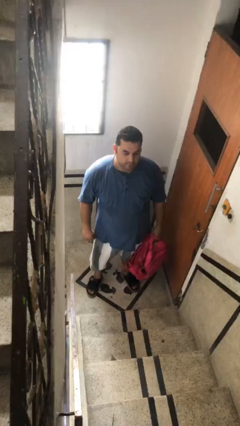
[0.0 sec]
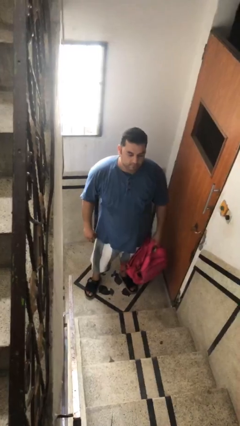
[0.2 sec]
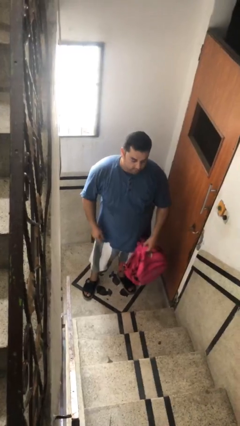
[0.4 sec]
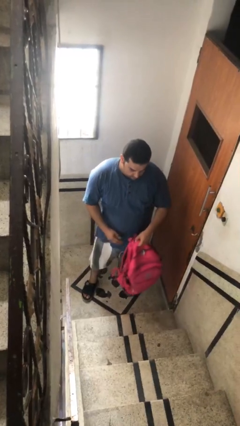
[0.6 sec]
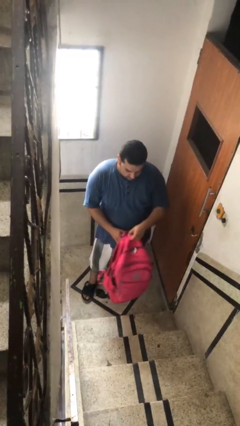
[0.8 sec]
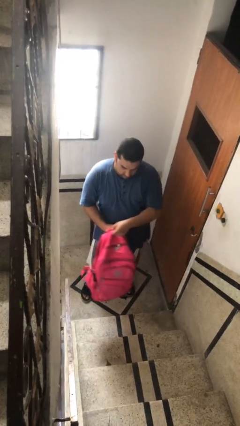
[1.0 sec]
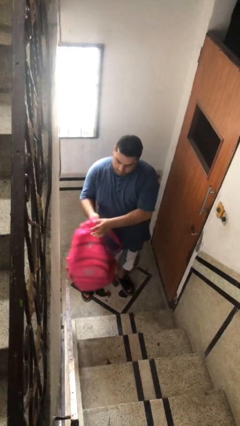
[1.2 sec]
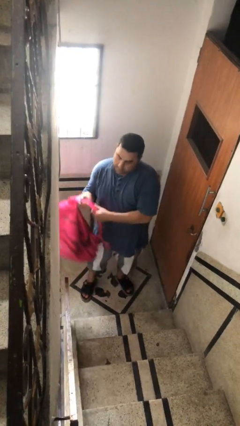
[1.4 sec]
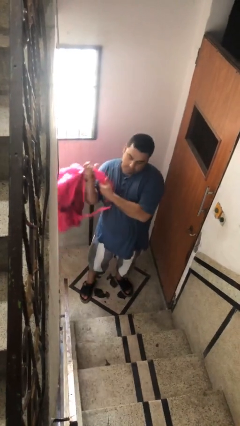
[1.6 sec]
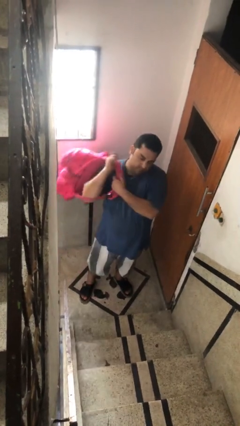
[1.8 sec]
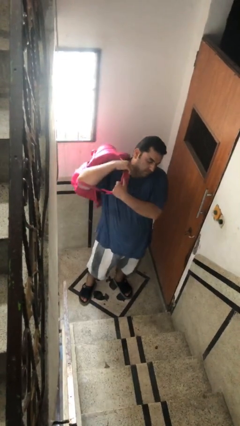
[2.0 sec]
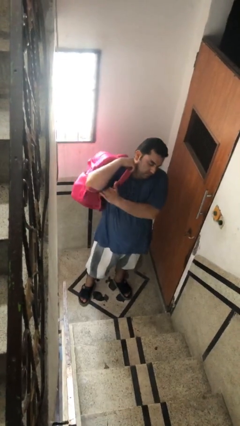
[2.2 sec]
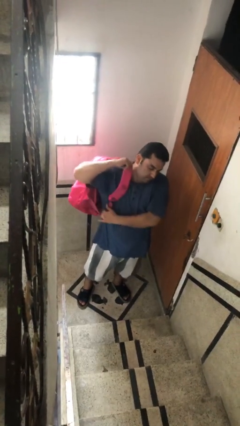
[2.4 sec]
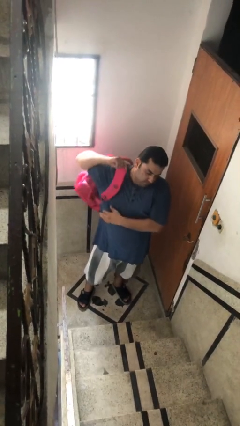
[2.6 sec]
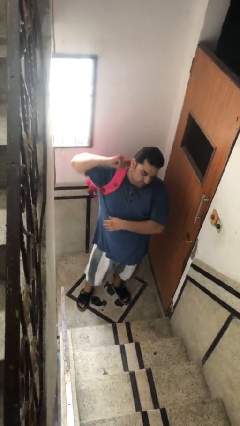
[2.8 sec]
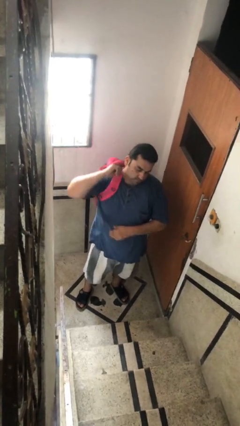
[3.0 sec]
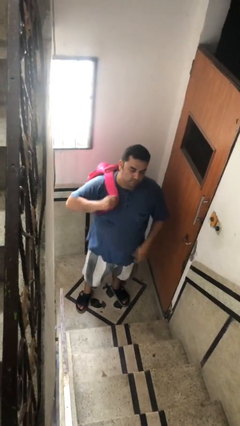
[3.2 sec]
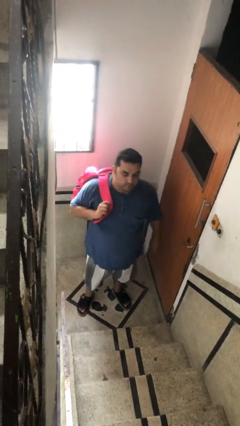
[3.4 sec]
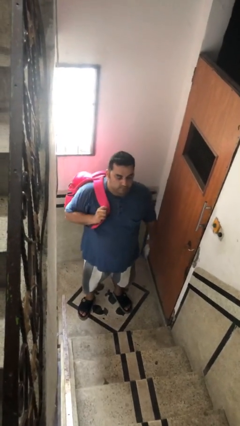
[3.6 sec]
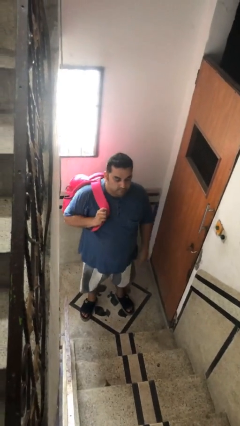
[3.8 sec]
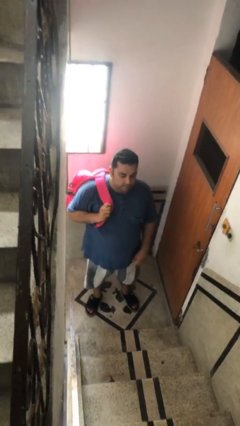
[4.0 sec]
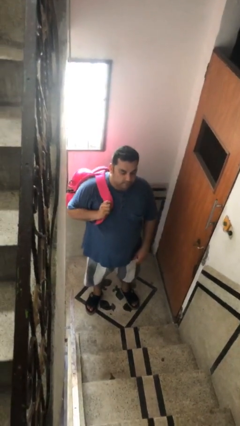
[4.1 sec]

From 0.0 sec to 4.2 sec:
person puts on backpack

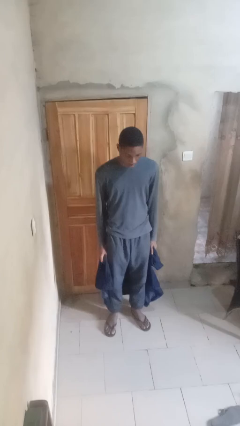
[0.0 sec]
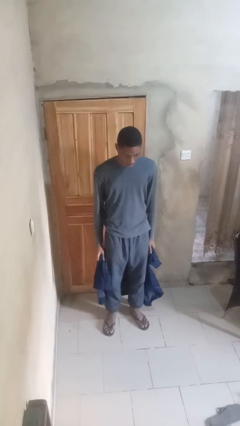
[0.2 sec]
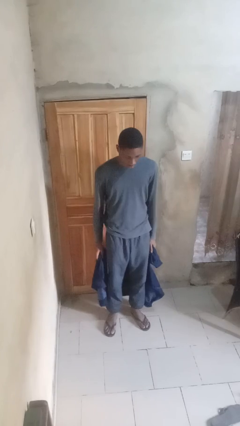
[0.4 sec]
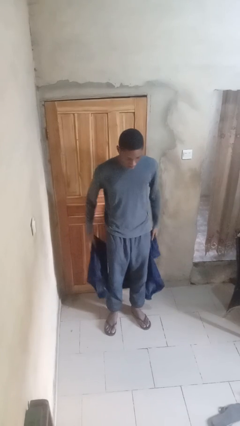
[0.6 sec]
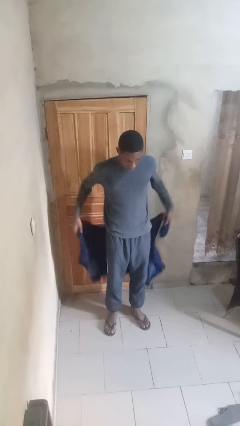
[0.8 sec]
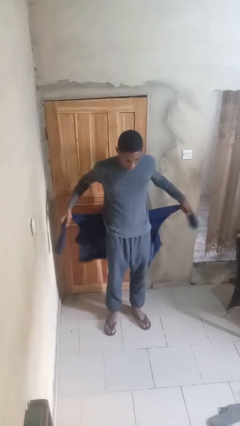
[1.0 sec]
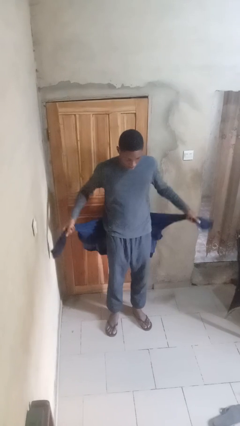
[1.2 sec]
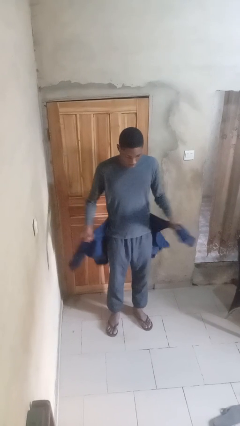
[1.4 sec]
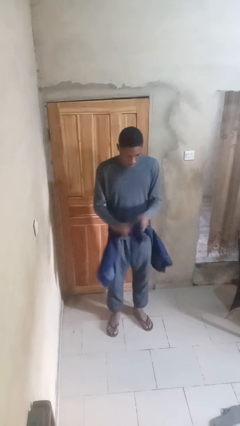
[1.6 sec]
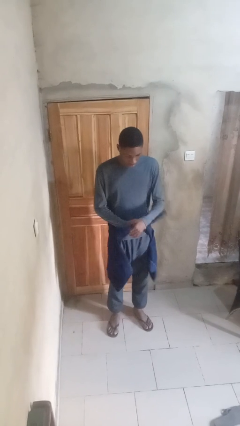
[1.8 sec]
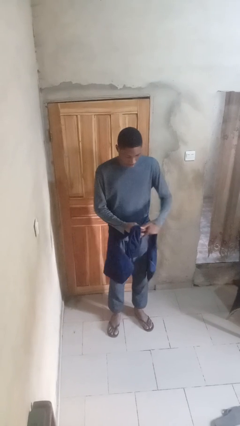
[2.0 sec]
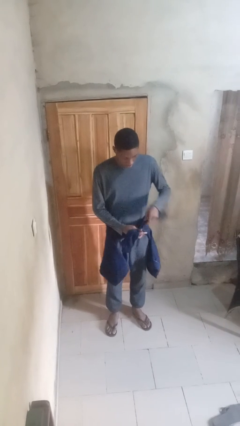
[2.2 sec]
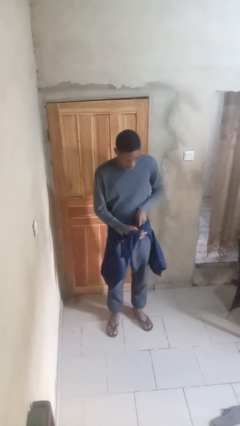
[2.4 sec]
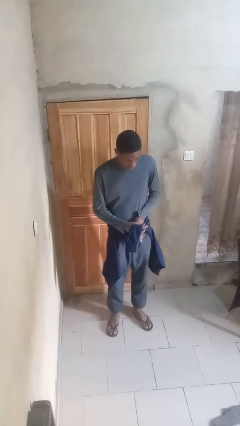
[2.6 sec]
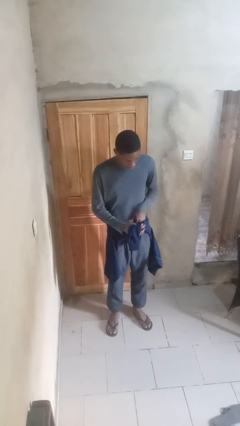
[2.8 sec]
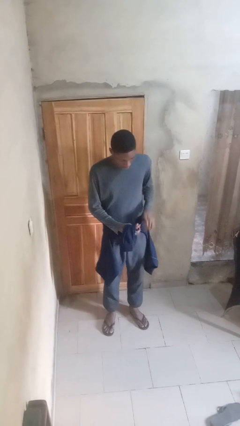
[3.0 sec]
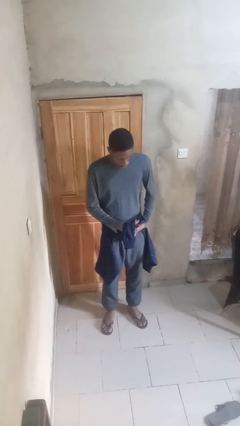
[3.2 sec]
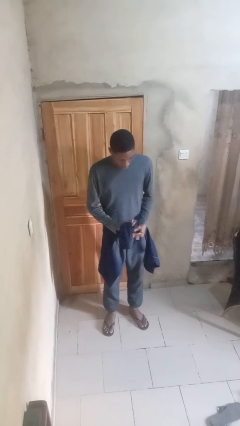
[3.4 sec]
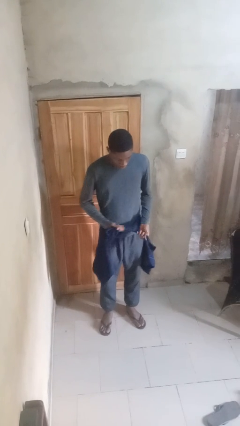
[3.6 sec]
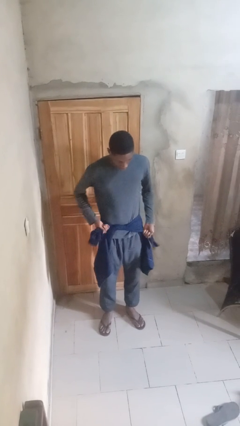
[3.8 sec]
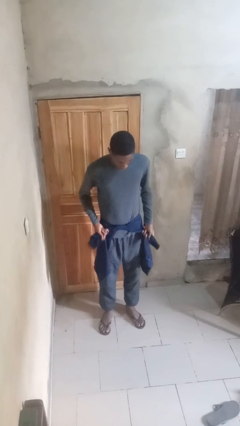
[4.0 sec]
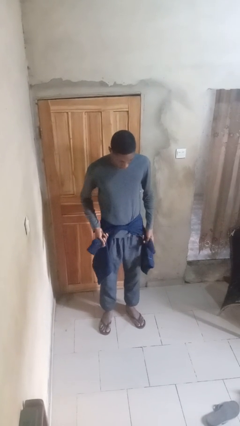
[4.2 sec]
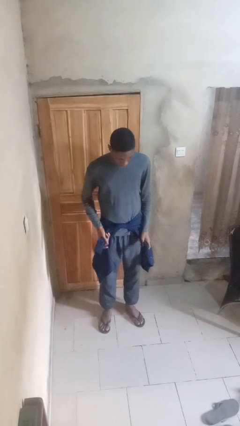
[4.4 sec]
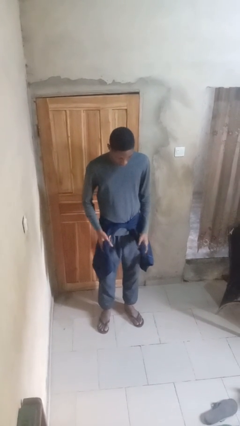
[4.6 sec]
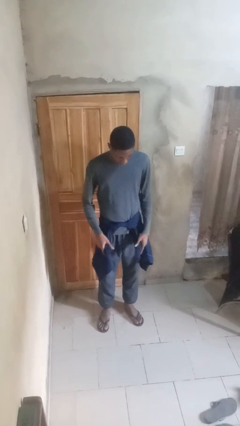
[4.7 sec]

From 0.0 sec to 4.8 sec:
person ties jacket around waist

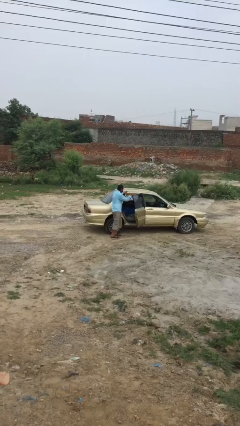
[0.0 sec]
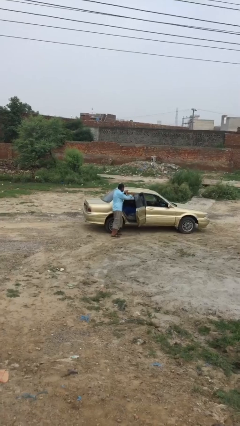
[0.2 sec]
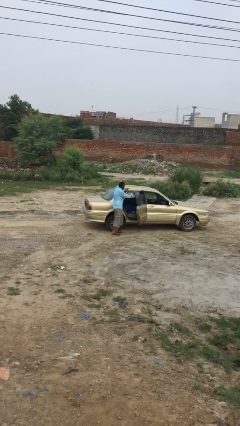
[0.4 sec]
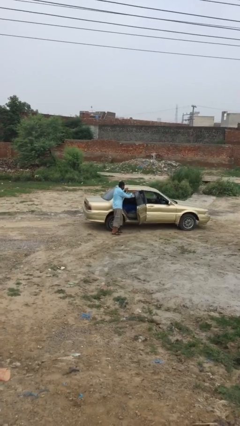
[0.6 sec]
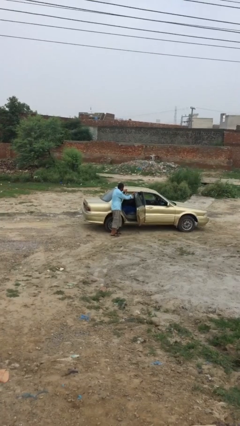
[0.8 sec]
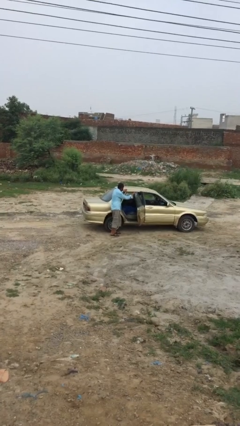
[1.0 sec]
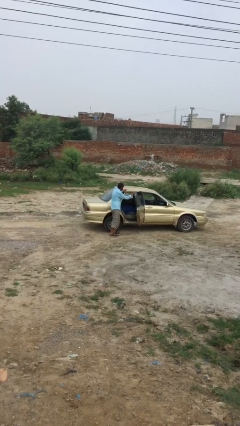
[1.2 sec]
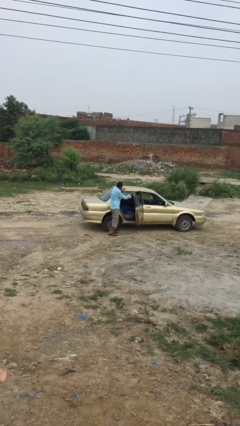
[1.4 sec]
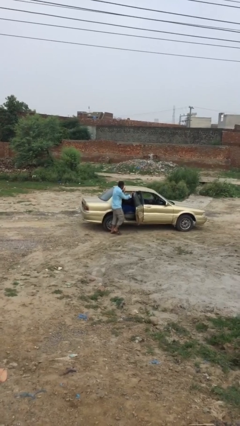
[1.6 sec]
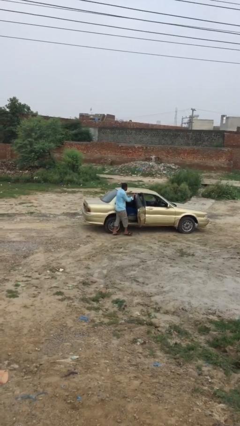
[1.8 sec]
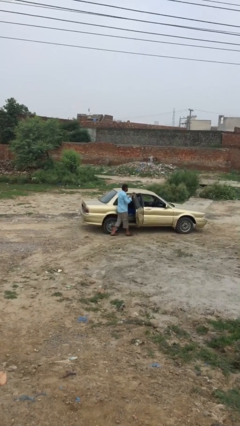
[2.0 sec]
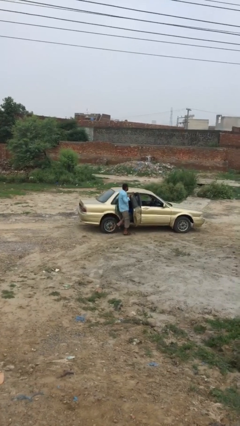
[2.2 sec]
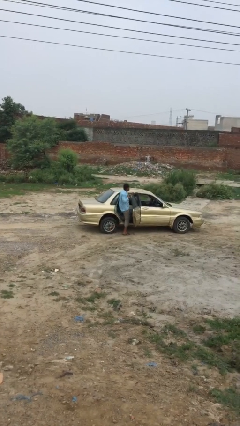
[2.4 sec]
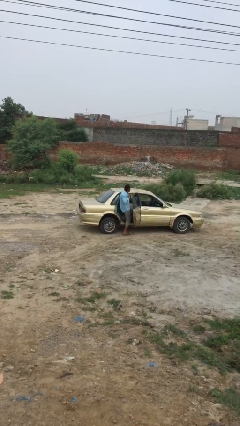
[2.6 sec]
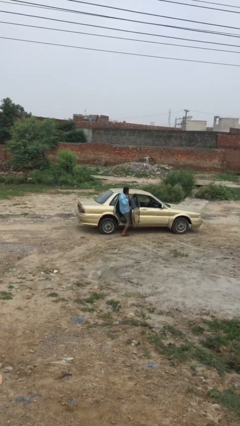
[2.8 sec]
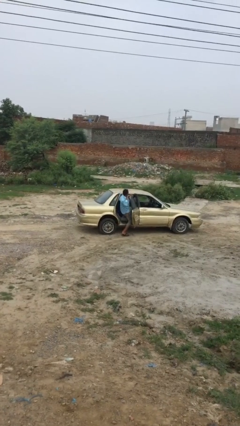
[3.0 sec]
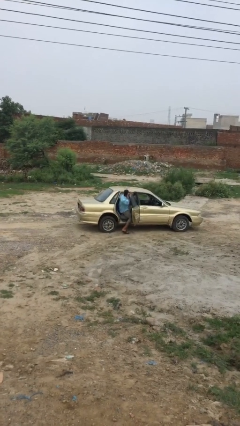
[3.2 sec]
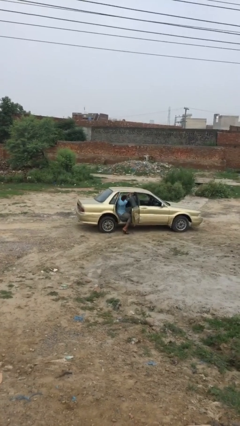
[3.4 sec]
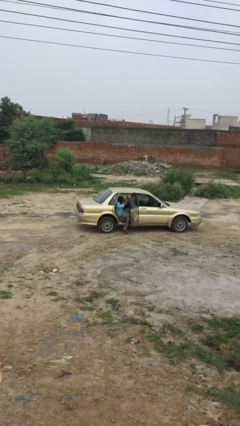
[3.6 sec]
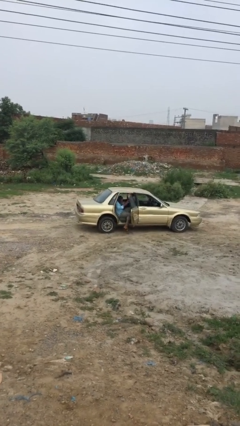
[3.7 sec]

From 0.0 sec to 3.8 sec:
person enters car

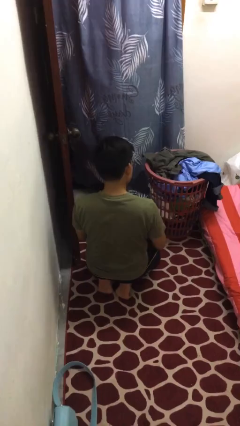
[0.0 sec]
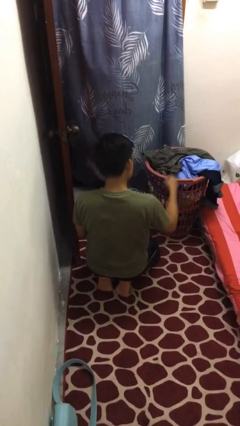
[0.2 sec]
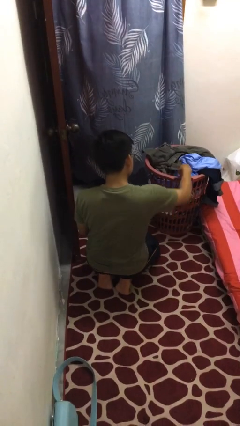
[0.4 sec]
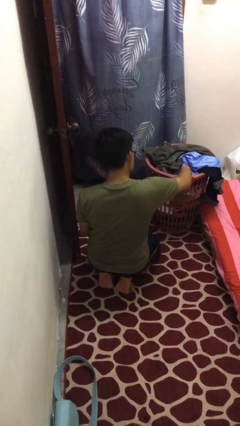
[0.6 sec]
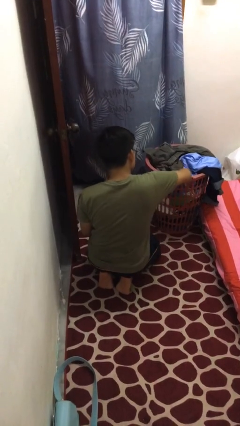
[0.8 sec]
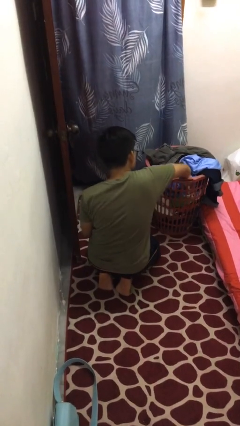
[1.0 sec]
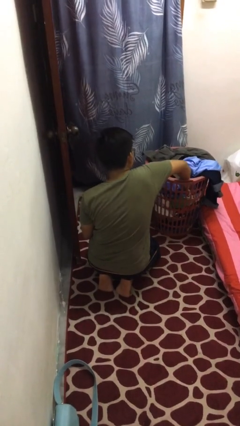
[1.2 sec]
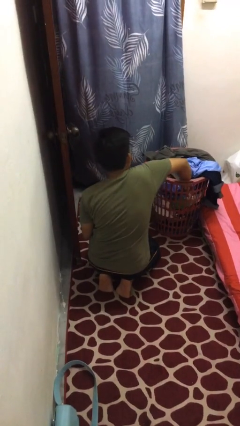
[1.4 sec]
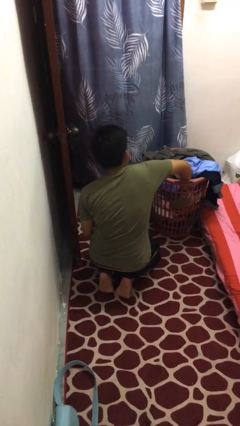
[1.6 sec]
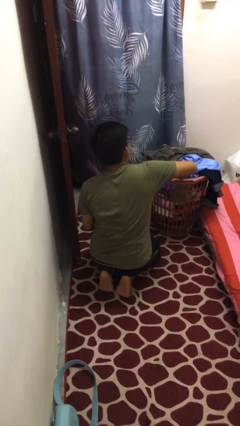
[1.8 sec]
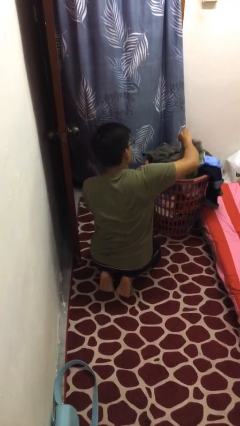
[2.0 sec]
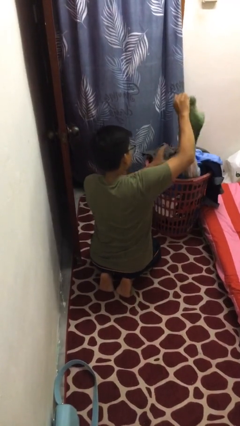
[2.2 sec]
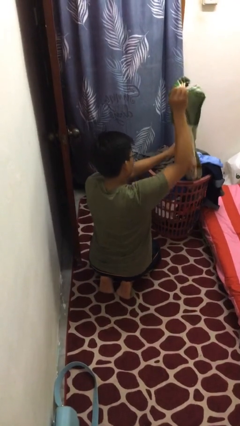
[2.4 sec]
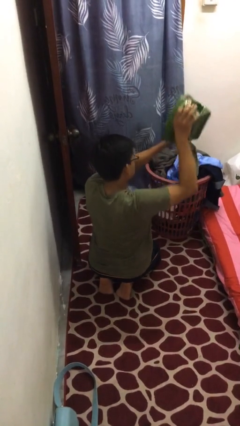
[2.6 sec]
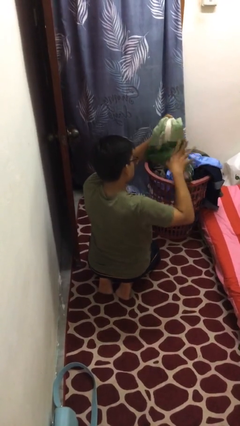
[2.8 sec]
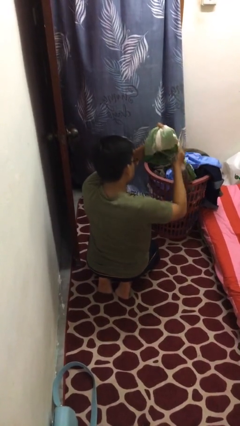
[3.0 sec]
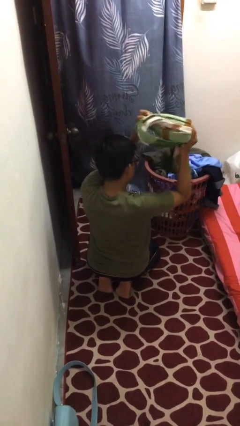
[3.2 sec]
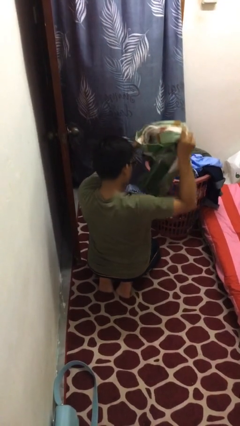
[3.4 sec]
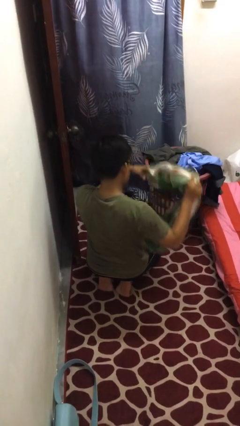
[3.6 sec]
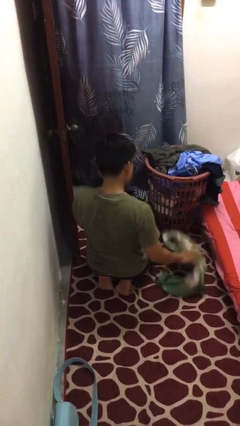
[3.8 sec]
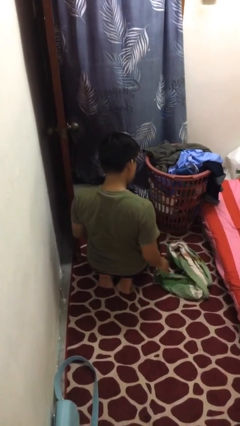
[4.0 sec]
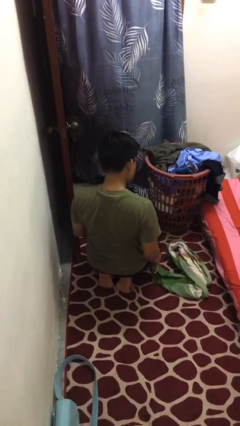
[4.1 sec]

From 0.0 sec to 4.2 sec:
person takes object from basket

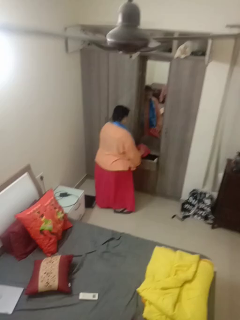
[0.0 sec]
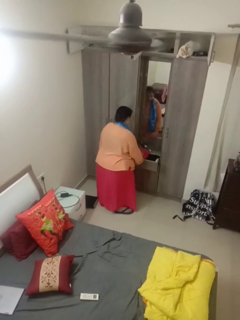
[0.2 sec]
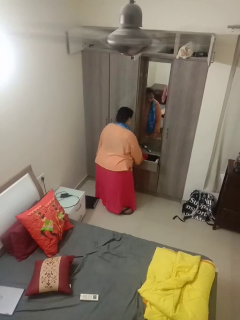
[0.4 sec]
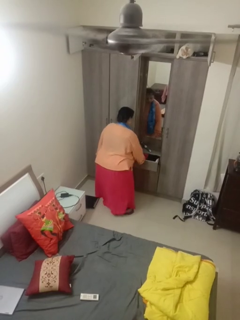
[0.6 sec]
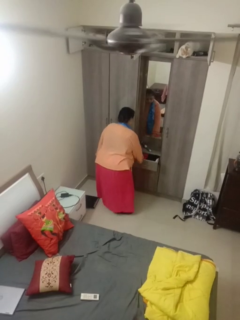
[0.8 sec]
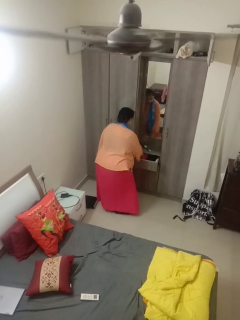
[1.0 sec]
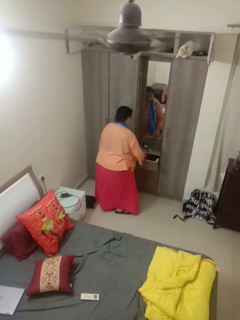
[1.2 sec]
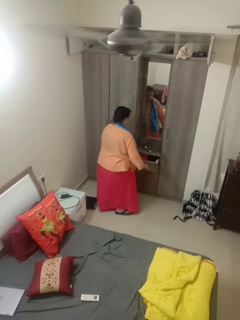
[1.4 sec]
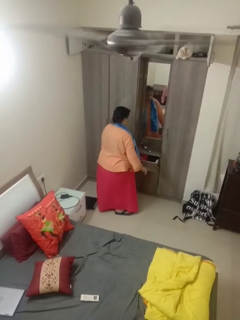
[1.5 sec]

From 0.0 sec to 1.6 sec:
person puts clothes into dresser
